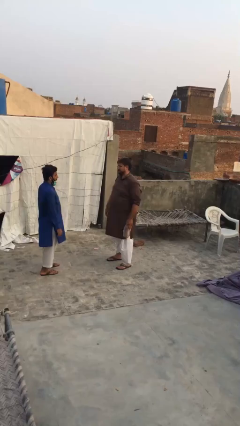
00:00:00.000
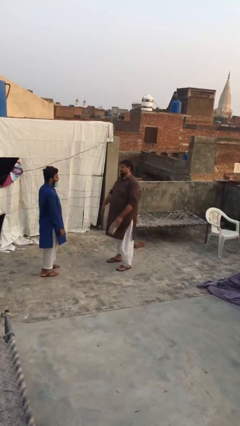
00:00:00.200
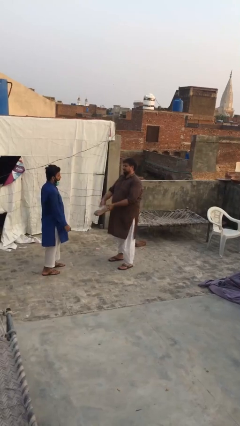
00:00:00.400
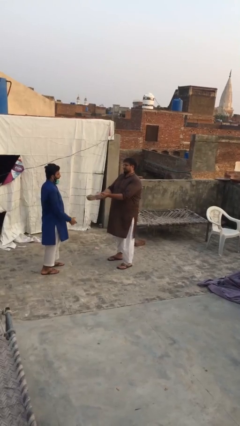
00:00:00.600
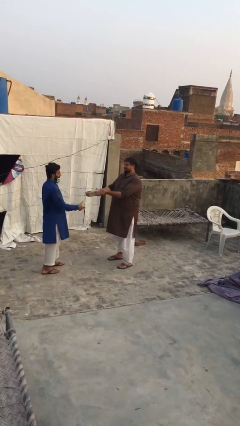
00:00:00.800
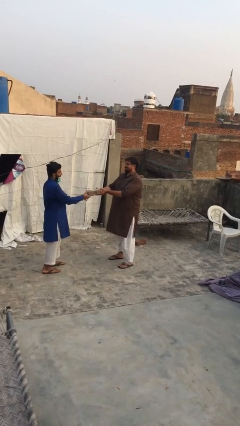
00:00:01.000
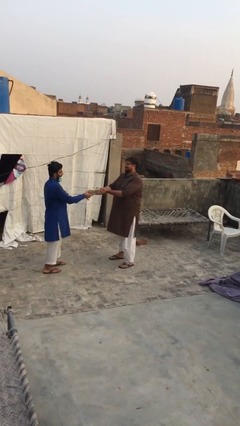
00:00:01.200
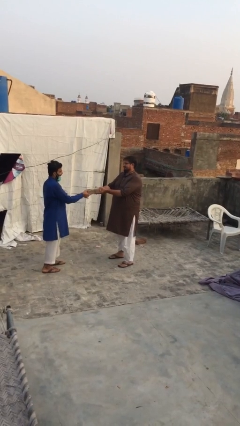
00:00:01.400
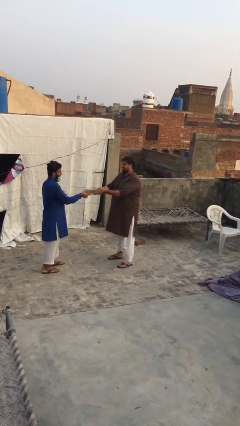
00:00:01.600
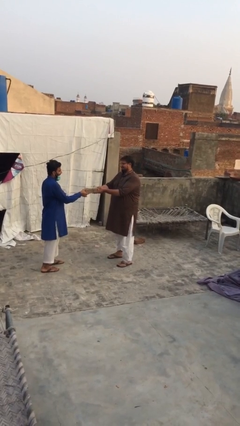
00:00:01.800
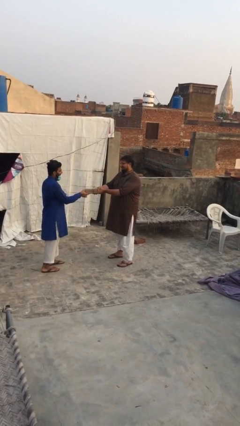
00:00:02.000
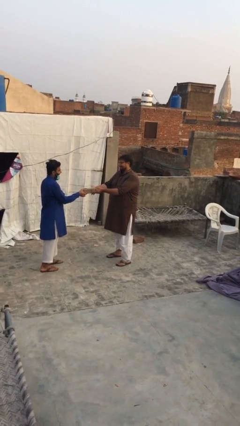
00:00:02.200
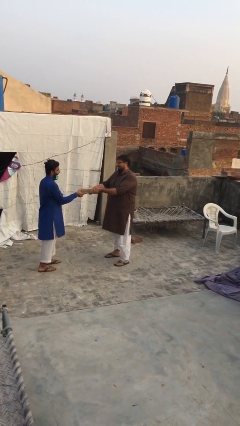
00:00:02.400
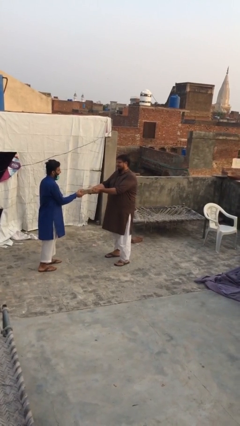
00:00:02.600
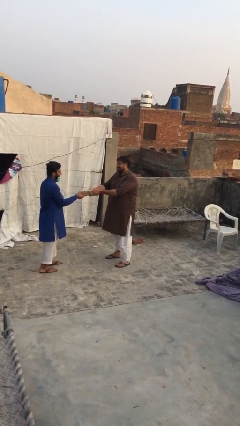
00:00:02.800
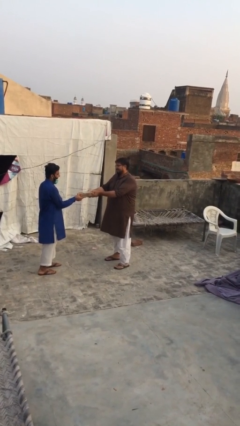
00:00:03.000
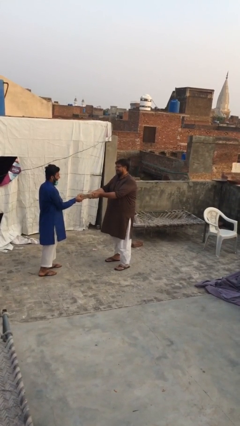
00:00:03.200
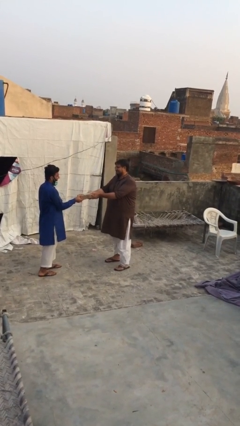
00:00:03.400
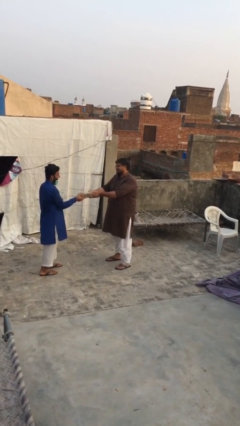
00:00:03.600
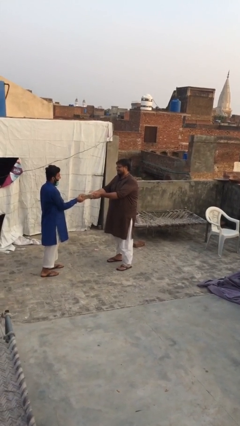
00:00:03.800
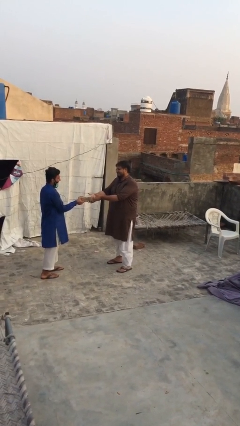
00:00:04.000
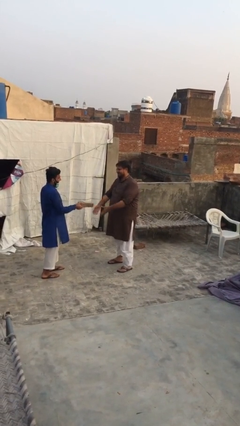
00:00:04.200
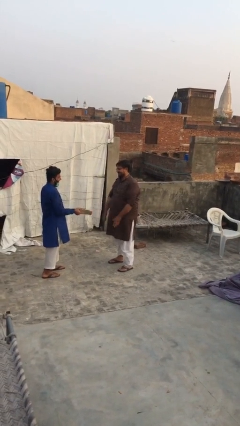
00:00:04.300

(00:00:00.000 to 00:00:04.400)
person transfers object to person

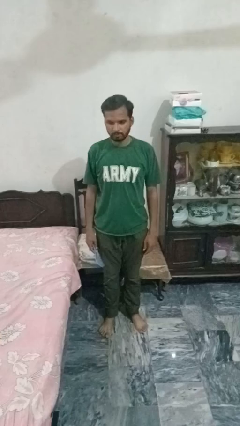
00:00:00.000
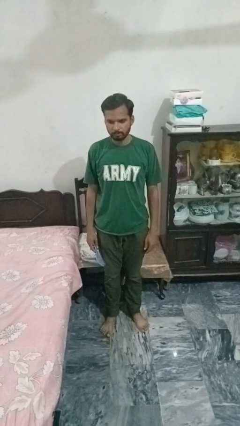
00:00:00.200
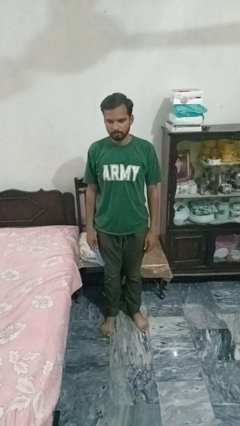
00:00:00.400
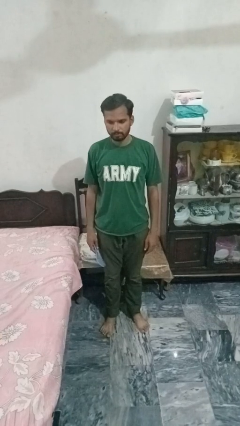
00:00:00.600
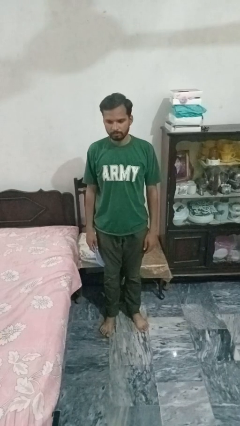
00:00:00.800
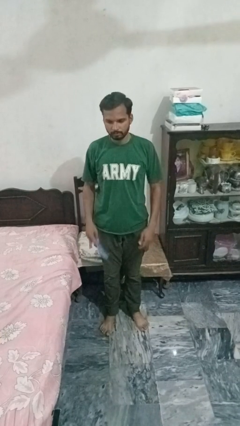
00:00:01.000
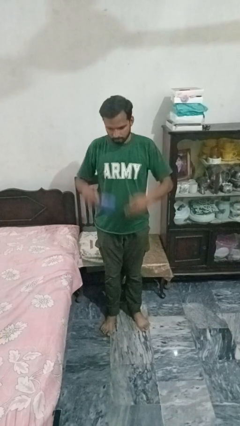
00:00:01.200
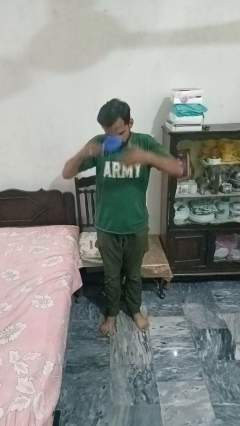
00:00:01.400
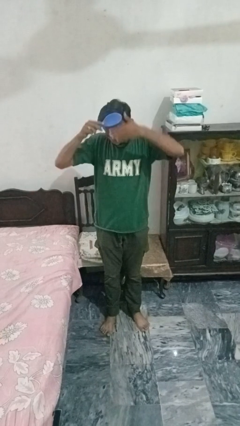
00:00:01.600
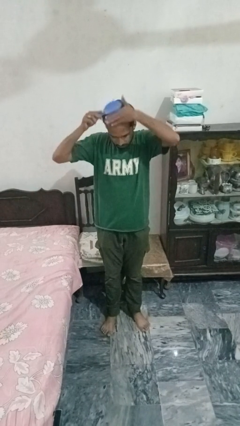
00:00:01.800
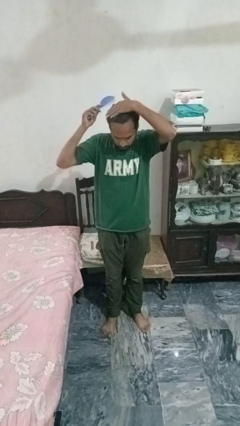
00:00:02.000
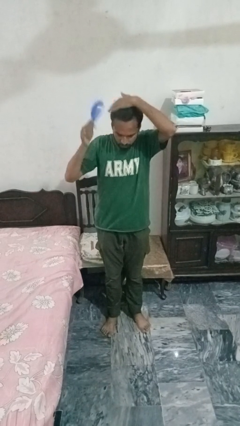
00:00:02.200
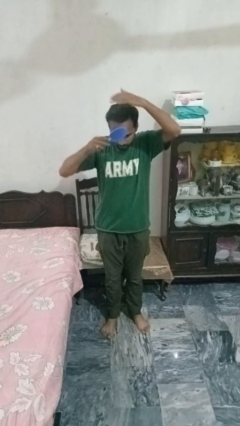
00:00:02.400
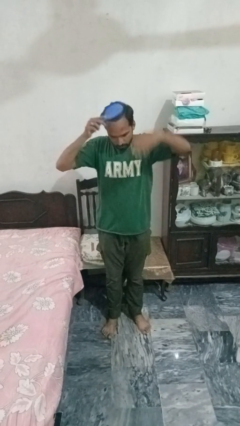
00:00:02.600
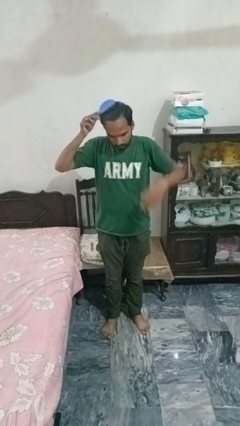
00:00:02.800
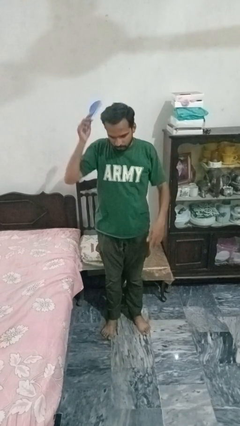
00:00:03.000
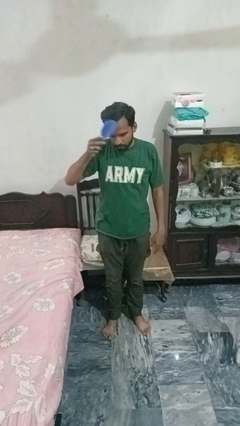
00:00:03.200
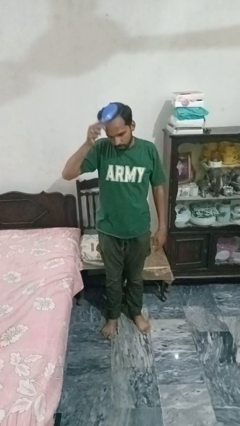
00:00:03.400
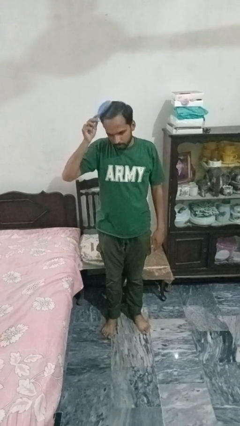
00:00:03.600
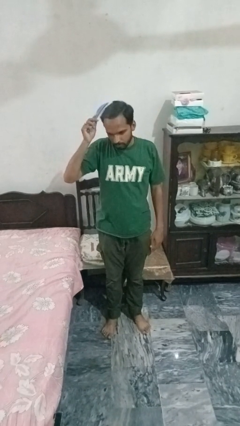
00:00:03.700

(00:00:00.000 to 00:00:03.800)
person brushes hair

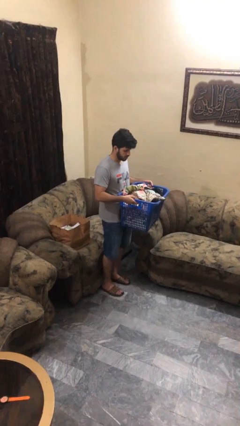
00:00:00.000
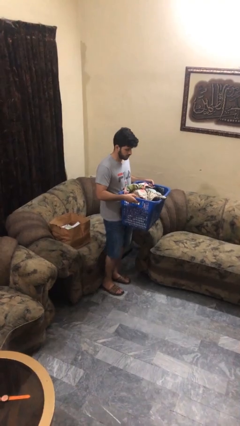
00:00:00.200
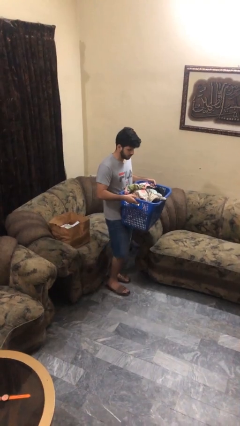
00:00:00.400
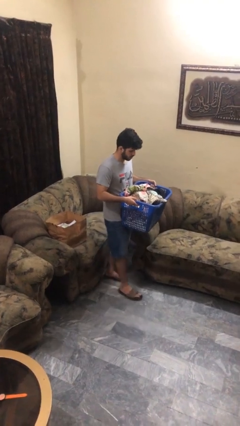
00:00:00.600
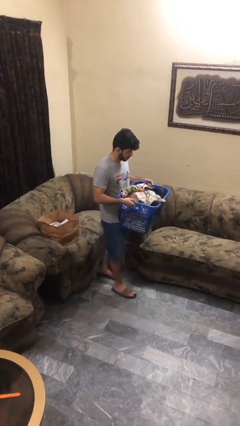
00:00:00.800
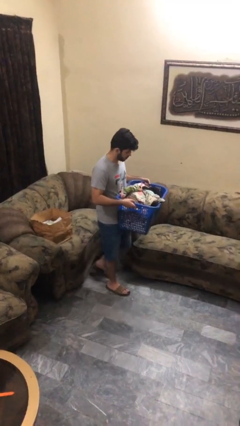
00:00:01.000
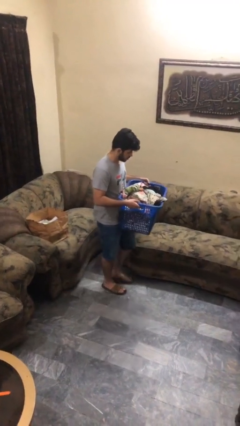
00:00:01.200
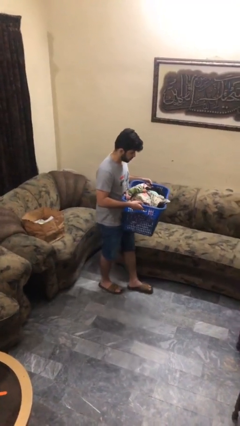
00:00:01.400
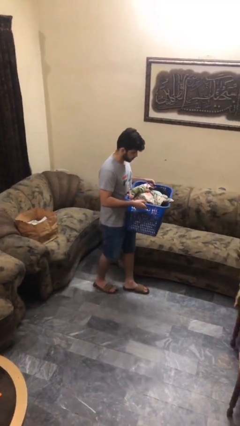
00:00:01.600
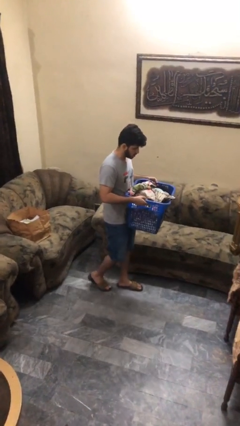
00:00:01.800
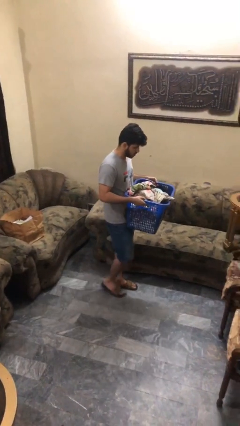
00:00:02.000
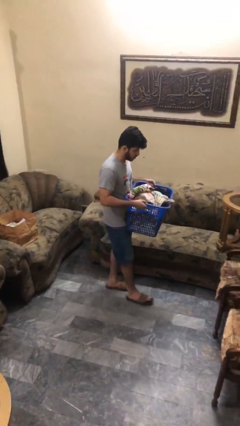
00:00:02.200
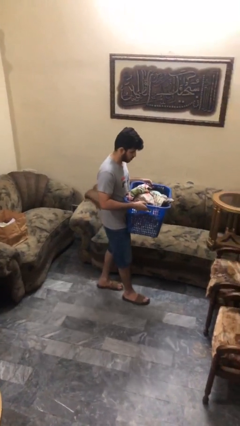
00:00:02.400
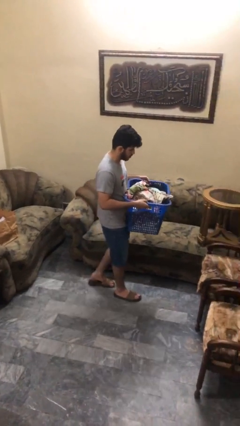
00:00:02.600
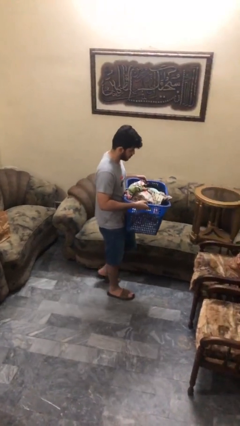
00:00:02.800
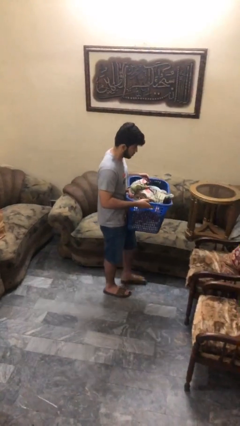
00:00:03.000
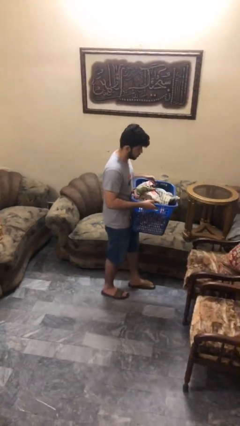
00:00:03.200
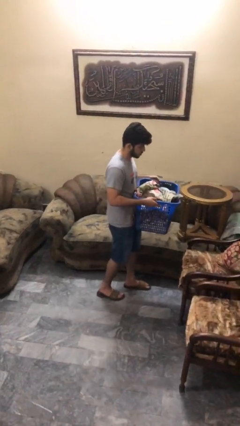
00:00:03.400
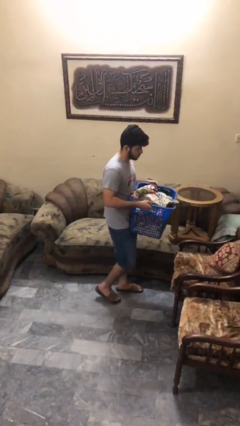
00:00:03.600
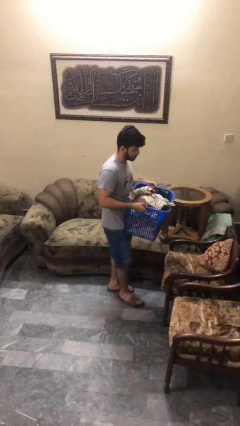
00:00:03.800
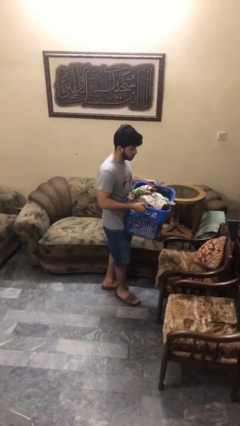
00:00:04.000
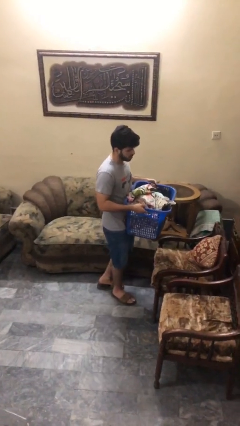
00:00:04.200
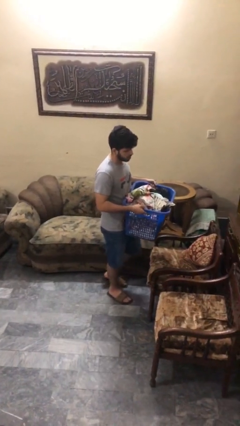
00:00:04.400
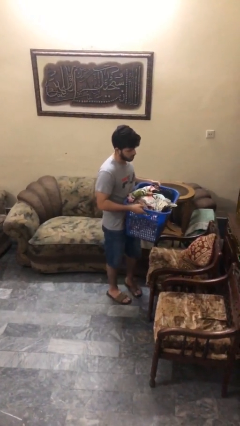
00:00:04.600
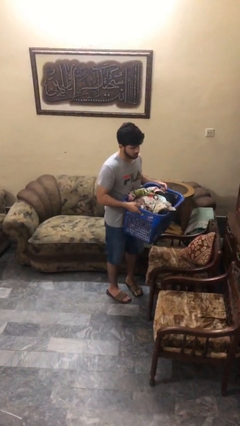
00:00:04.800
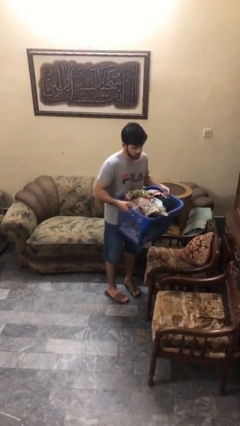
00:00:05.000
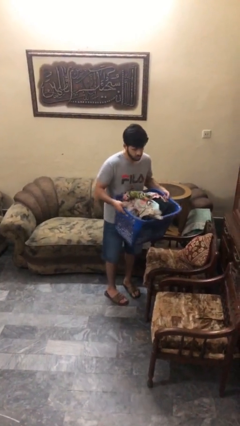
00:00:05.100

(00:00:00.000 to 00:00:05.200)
person carries laundry basket

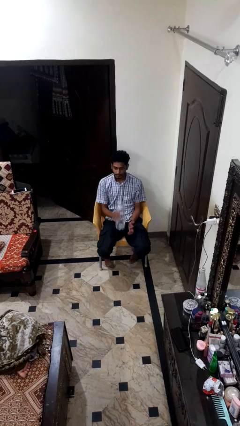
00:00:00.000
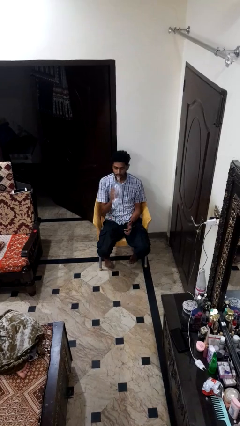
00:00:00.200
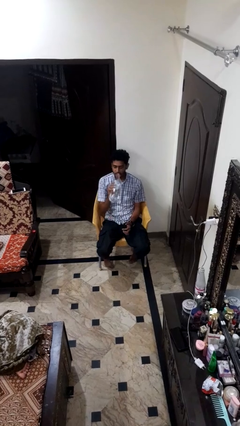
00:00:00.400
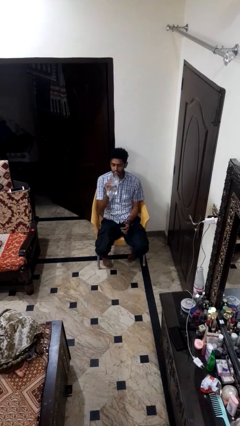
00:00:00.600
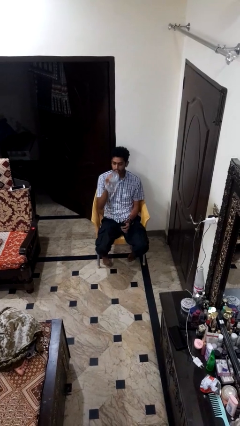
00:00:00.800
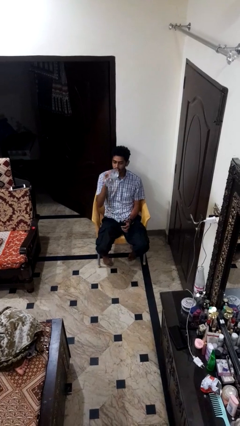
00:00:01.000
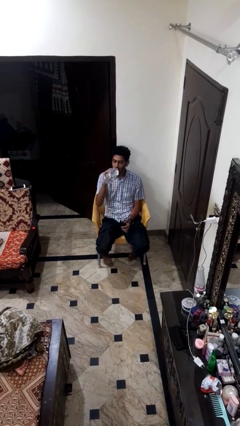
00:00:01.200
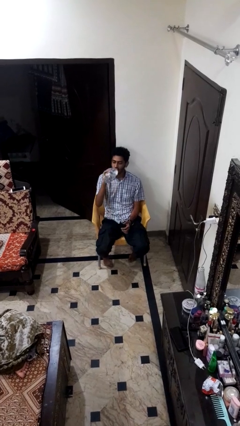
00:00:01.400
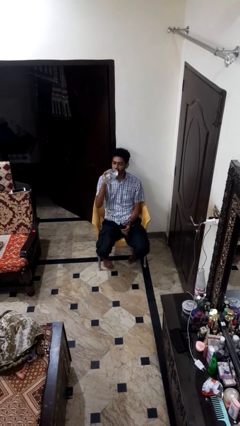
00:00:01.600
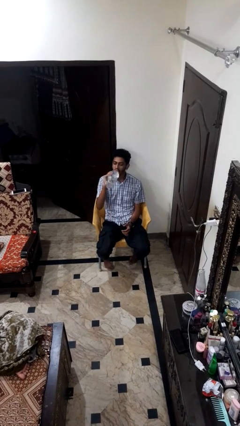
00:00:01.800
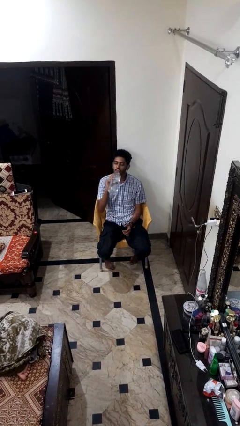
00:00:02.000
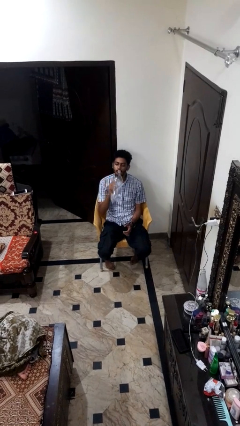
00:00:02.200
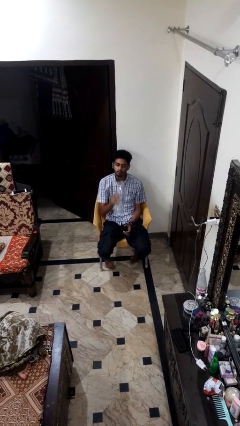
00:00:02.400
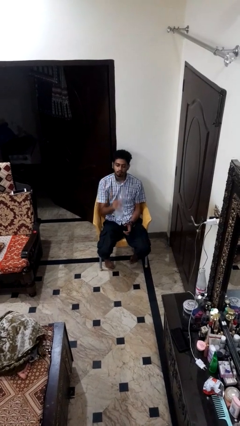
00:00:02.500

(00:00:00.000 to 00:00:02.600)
person drinks from bottle

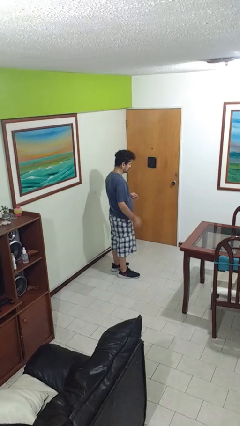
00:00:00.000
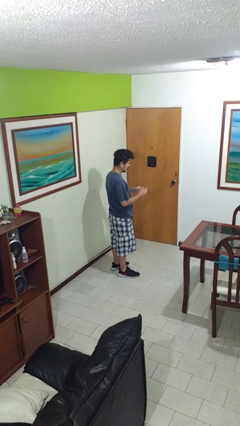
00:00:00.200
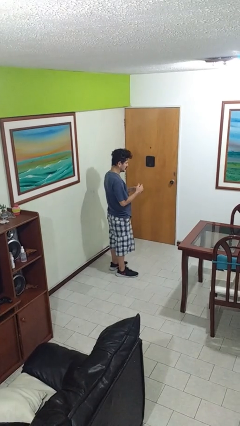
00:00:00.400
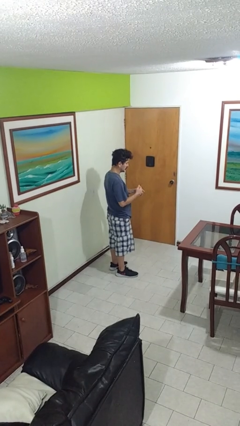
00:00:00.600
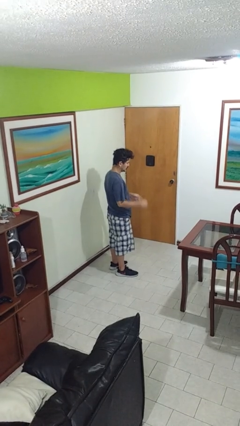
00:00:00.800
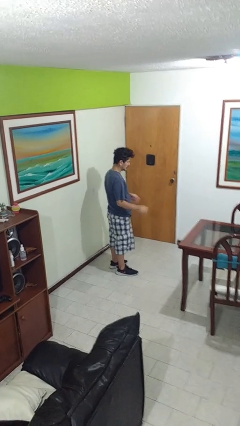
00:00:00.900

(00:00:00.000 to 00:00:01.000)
person puts on ring

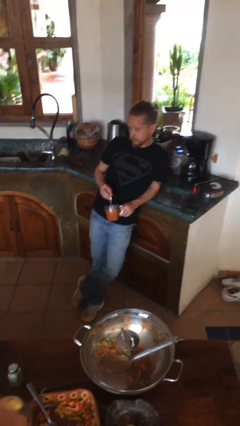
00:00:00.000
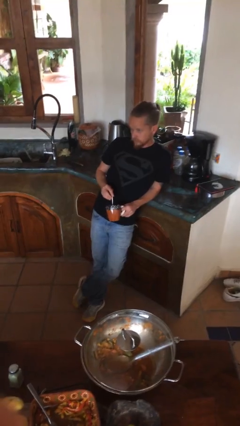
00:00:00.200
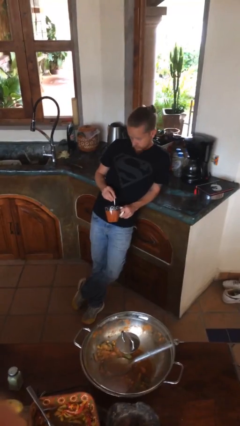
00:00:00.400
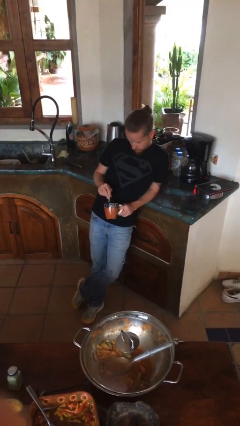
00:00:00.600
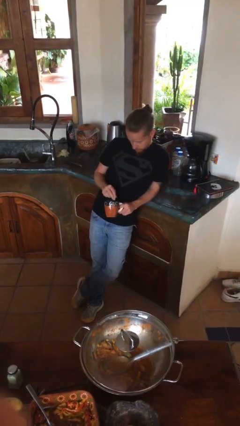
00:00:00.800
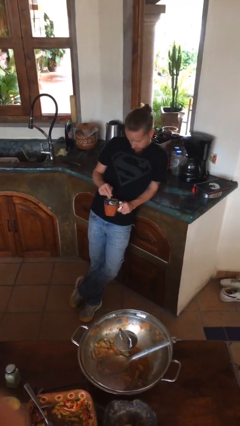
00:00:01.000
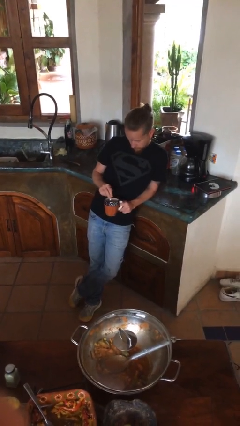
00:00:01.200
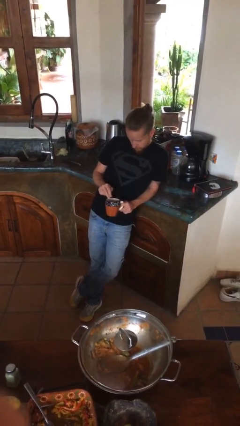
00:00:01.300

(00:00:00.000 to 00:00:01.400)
person stirs mug
